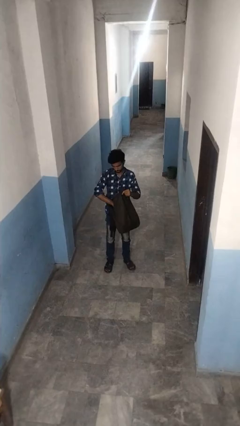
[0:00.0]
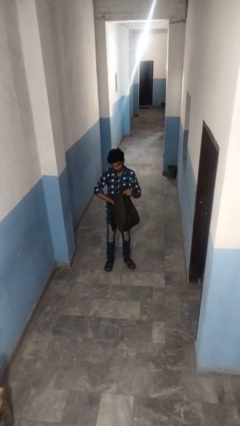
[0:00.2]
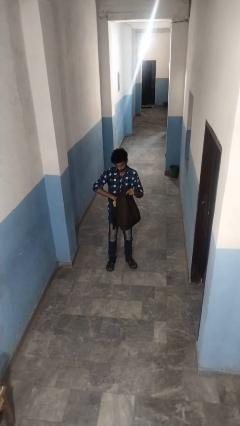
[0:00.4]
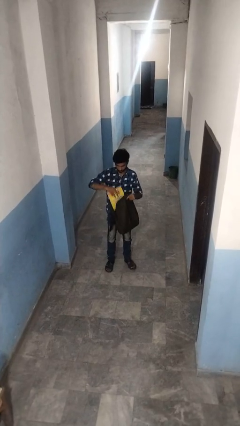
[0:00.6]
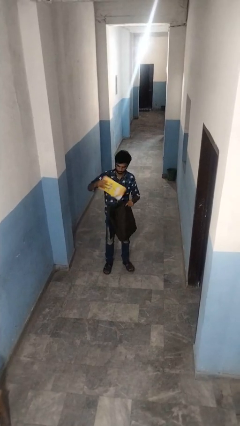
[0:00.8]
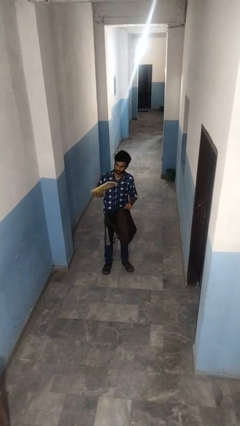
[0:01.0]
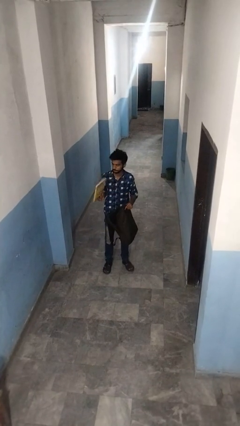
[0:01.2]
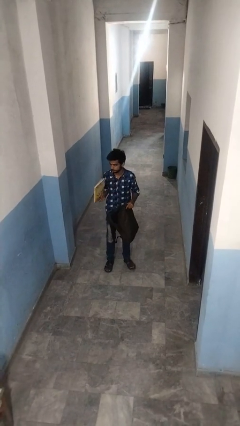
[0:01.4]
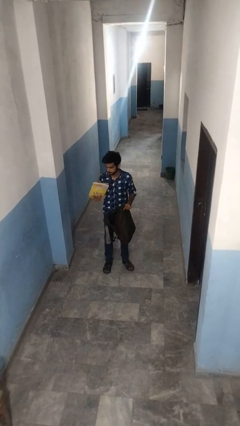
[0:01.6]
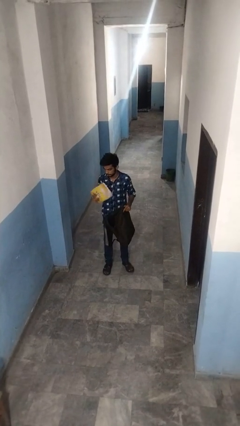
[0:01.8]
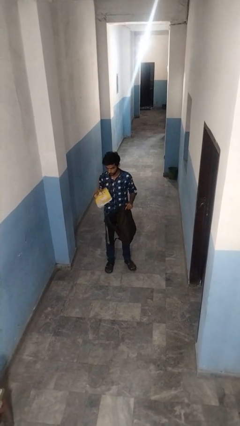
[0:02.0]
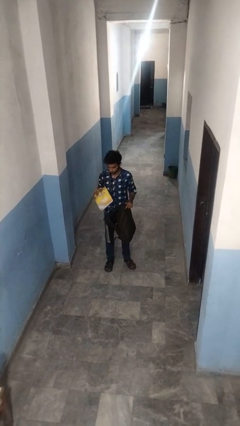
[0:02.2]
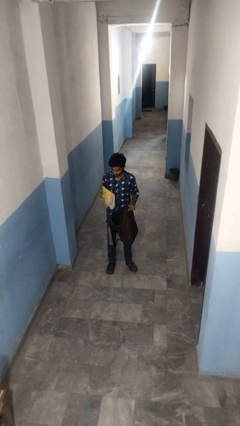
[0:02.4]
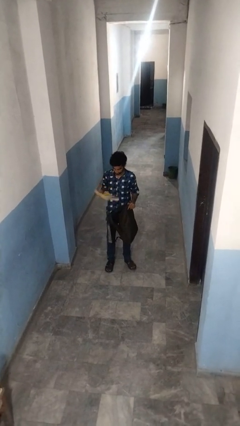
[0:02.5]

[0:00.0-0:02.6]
person takes object from backpack

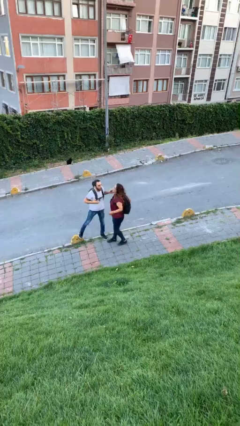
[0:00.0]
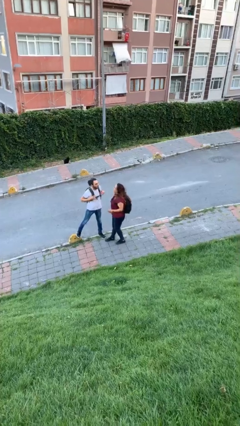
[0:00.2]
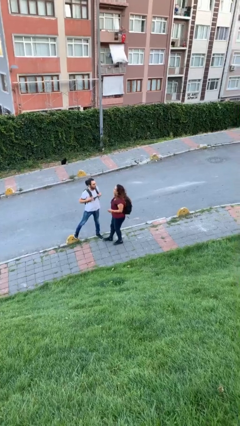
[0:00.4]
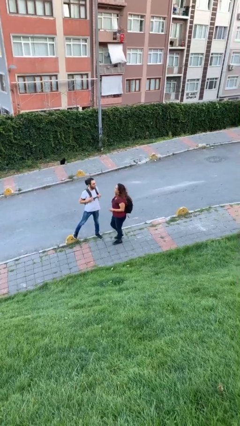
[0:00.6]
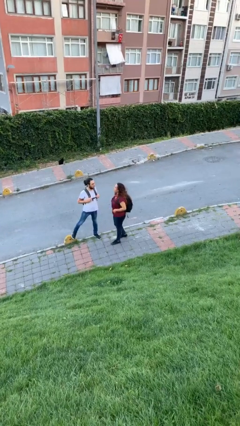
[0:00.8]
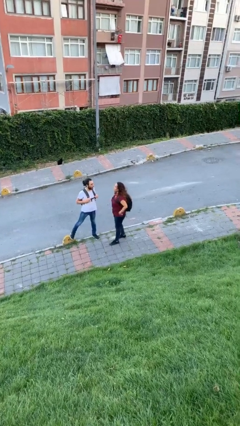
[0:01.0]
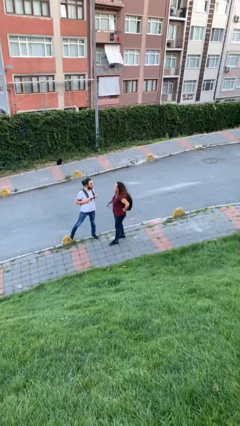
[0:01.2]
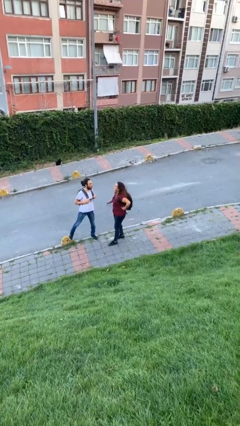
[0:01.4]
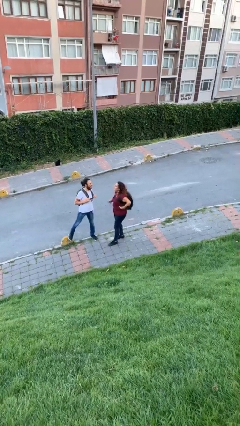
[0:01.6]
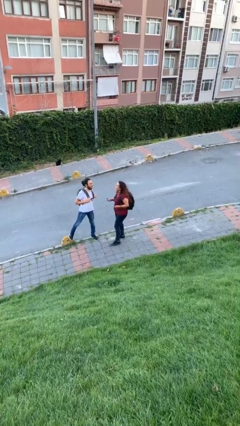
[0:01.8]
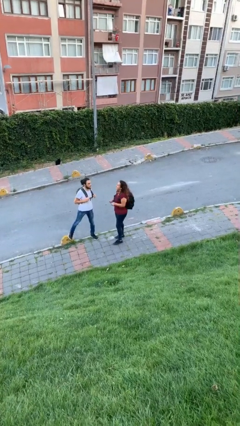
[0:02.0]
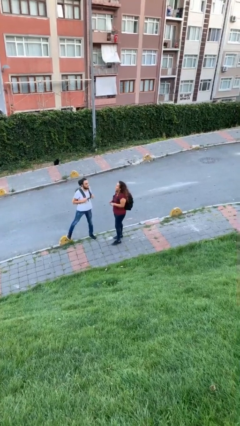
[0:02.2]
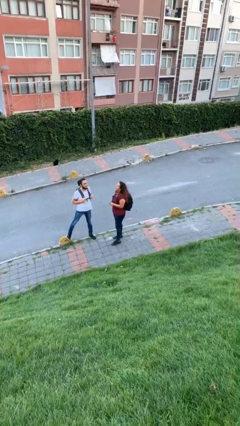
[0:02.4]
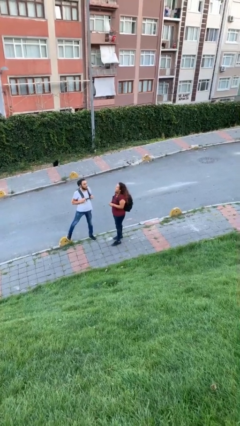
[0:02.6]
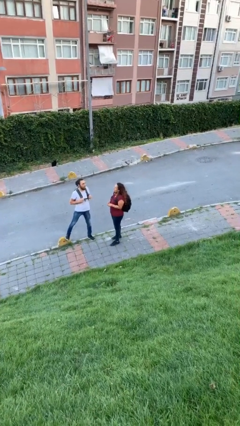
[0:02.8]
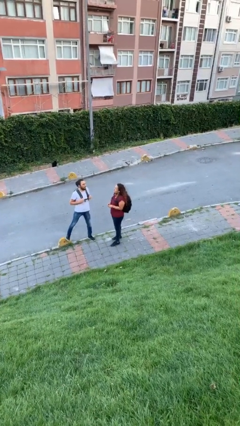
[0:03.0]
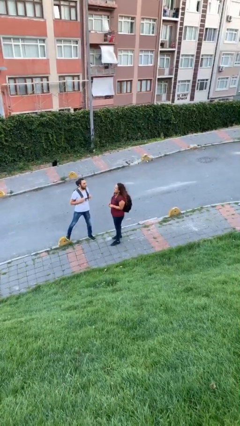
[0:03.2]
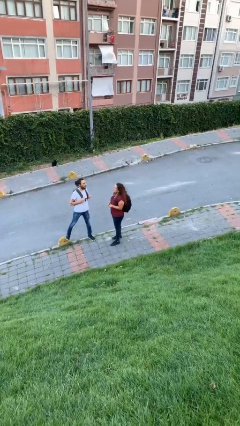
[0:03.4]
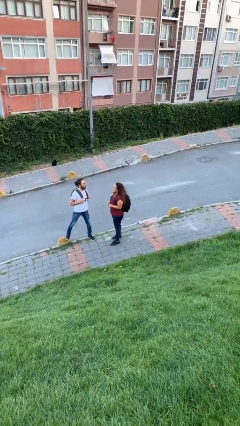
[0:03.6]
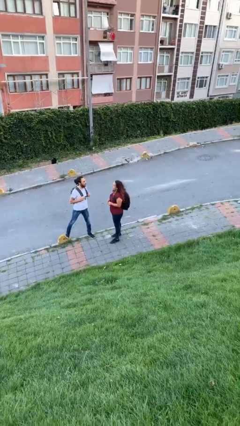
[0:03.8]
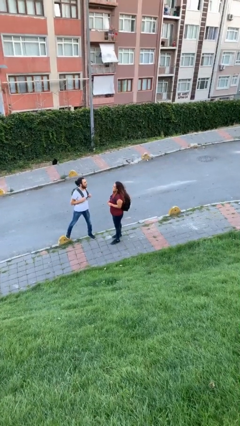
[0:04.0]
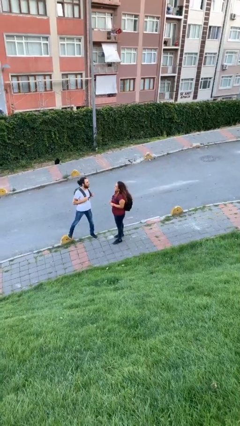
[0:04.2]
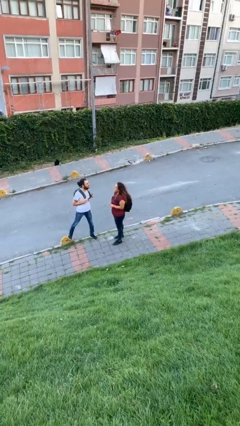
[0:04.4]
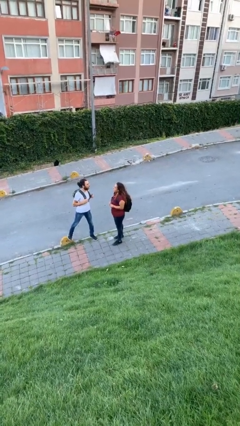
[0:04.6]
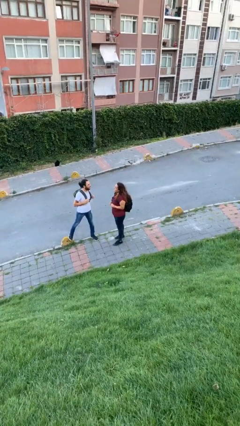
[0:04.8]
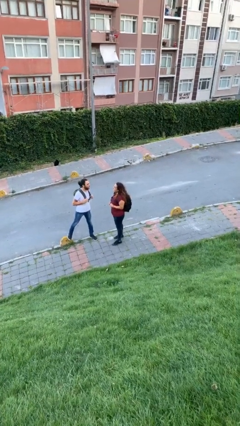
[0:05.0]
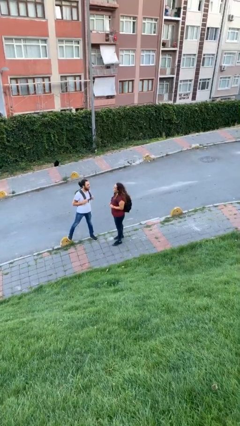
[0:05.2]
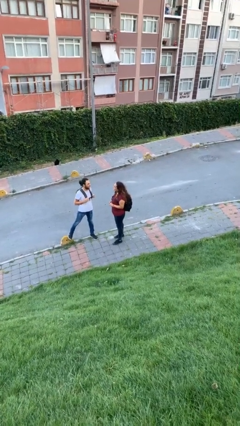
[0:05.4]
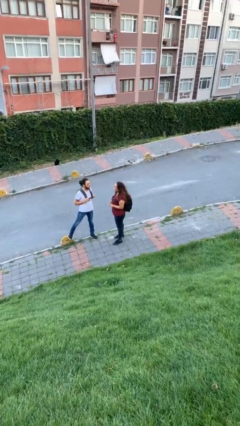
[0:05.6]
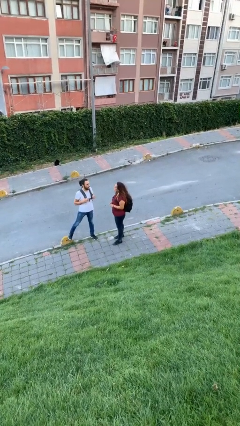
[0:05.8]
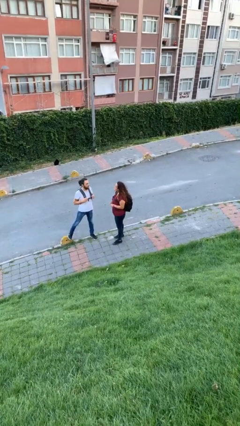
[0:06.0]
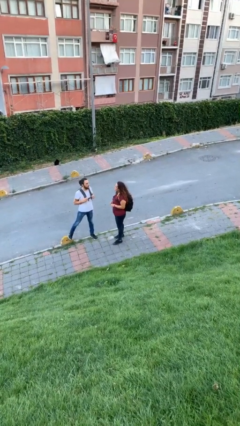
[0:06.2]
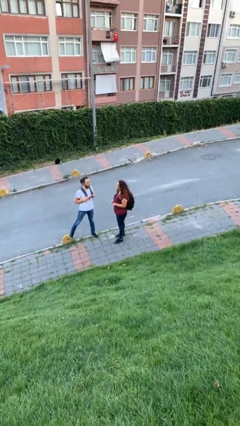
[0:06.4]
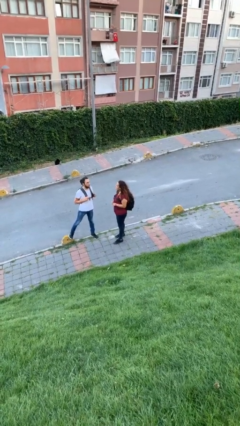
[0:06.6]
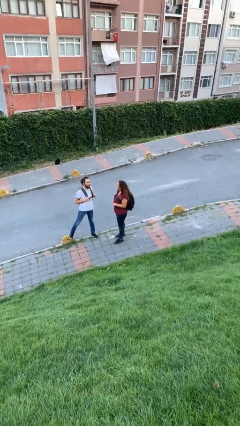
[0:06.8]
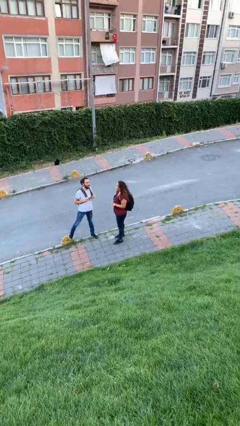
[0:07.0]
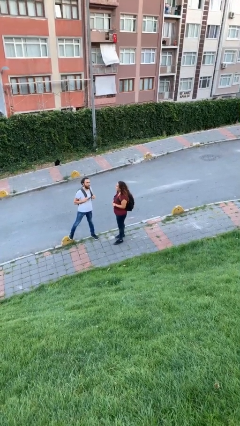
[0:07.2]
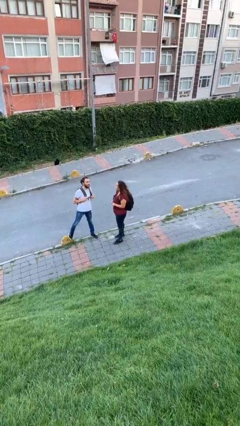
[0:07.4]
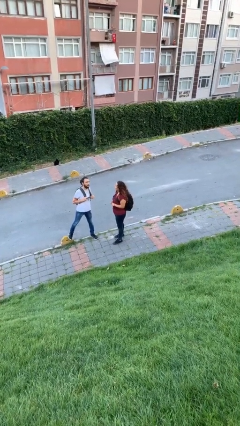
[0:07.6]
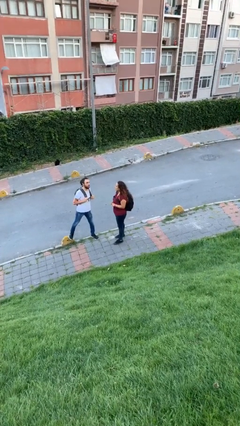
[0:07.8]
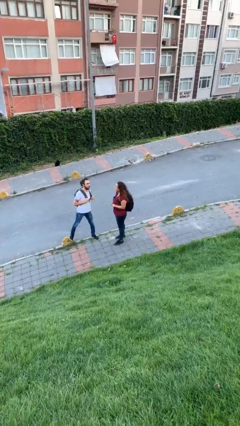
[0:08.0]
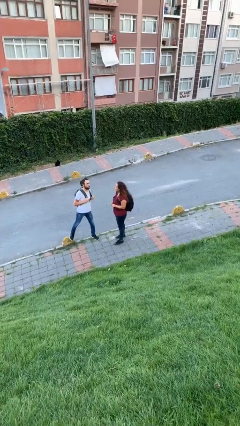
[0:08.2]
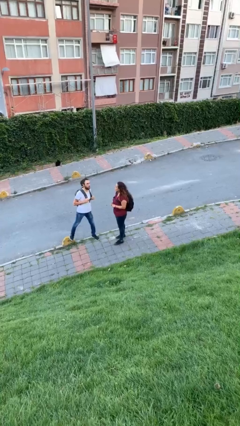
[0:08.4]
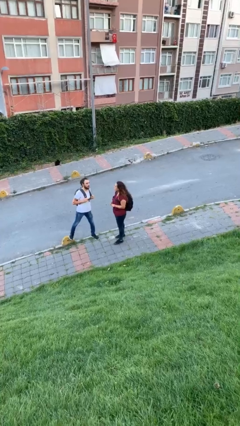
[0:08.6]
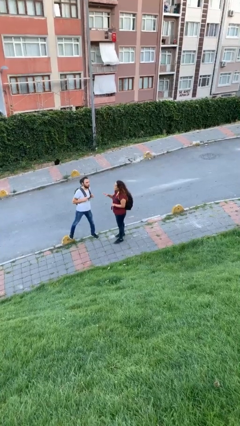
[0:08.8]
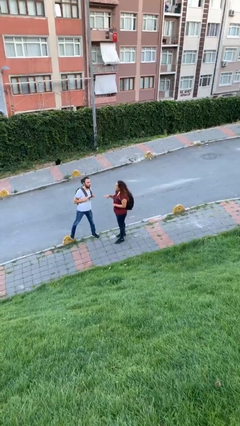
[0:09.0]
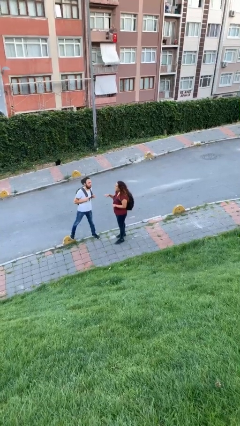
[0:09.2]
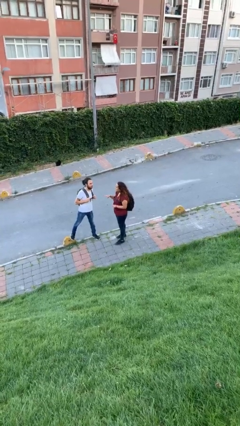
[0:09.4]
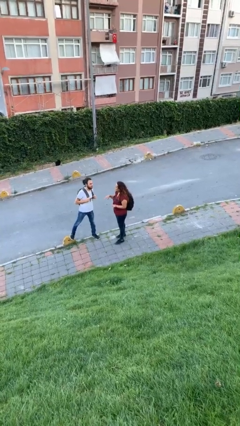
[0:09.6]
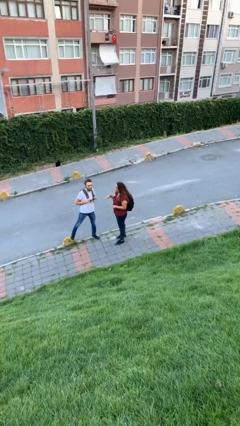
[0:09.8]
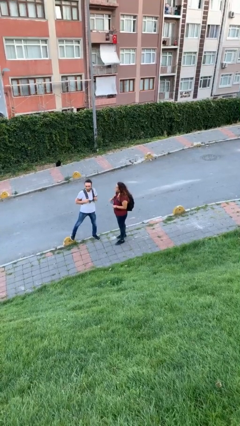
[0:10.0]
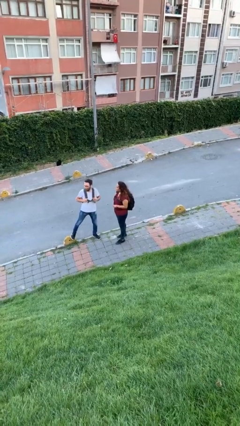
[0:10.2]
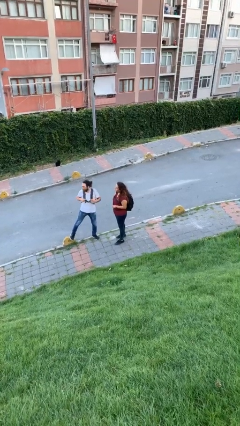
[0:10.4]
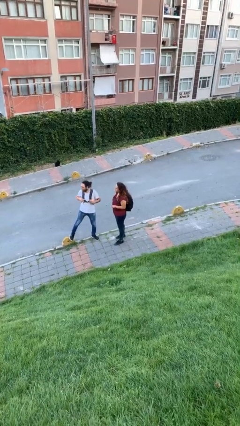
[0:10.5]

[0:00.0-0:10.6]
person talks to person

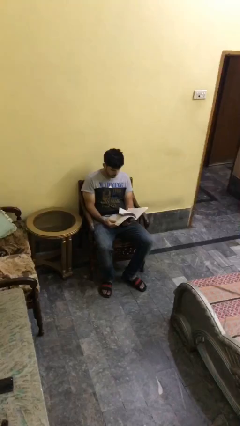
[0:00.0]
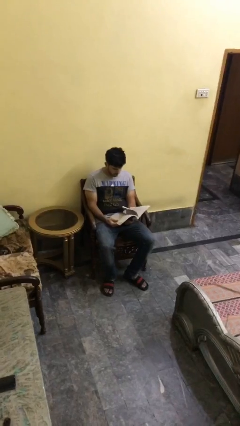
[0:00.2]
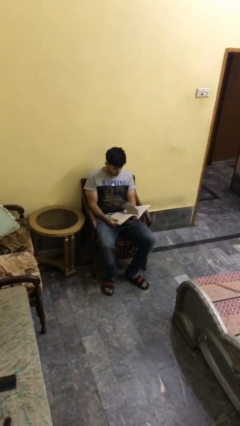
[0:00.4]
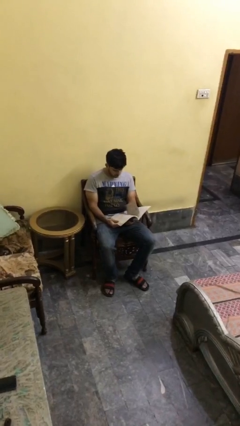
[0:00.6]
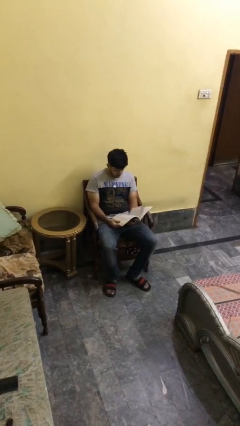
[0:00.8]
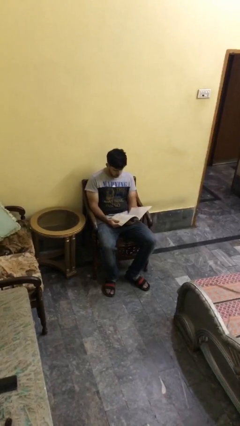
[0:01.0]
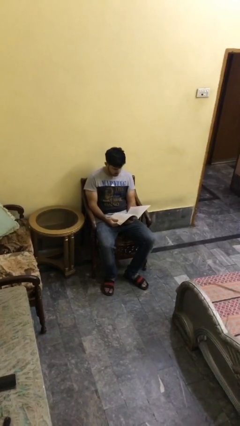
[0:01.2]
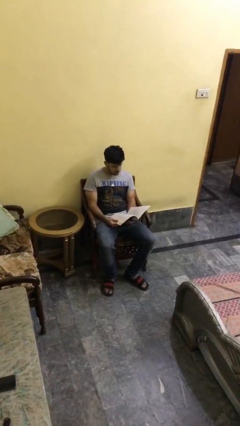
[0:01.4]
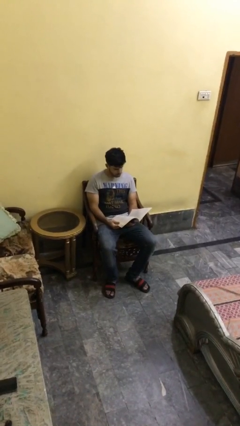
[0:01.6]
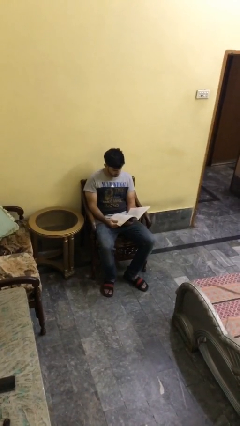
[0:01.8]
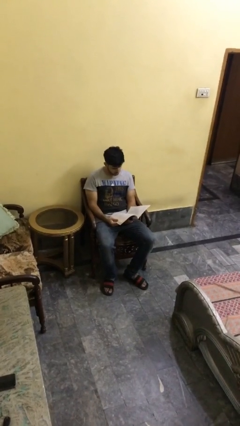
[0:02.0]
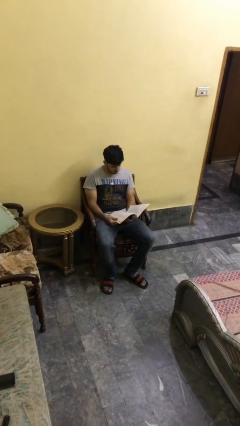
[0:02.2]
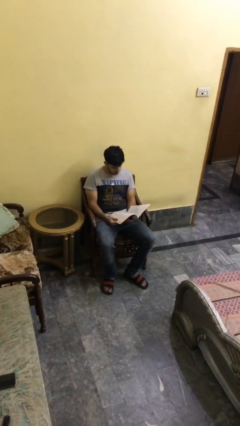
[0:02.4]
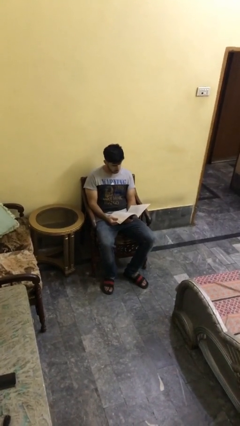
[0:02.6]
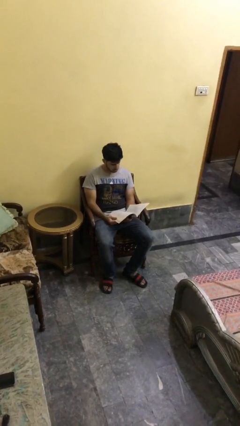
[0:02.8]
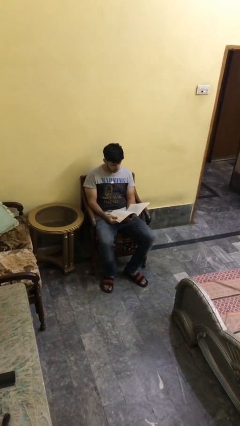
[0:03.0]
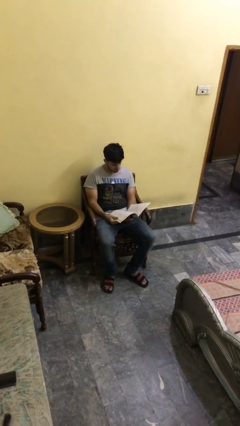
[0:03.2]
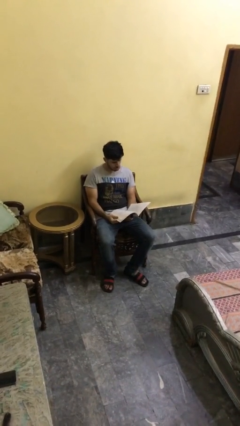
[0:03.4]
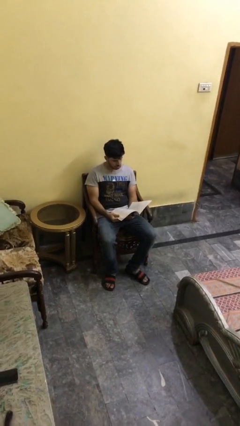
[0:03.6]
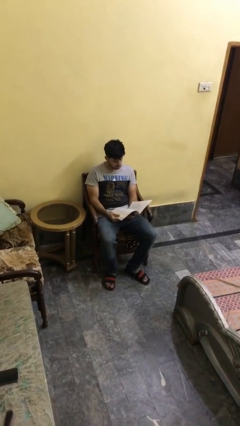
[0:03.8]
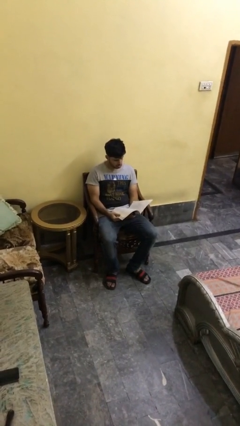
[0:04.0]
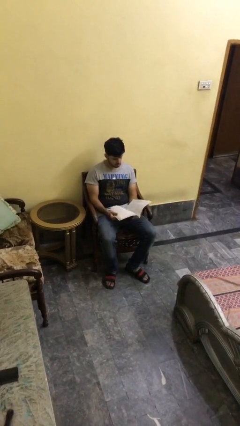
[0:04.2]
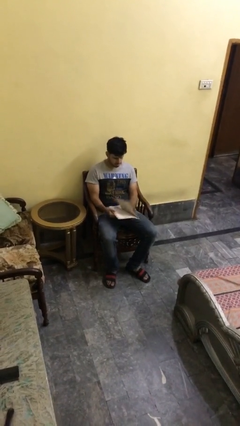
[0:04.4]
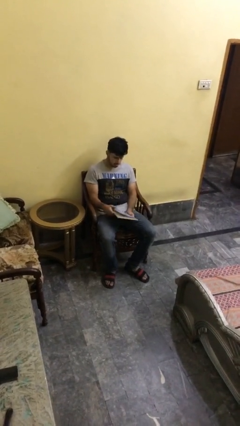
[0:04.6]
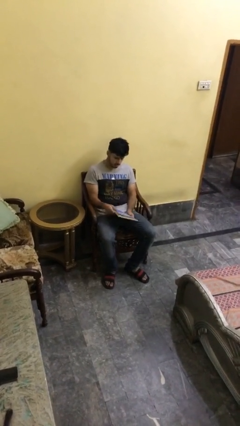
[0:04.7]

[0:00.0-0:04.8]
person reads document
